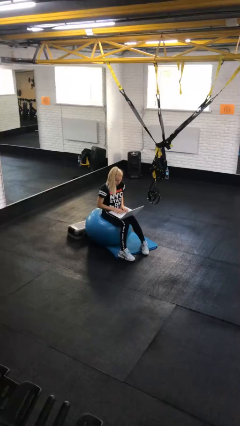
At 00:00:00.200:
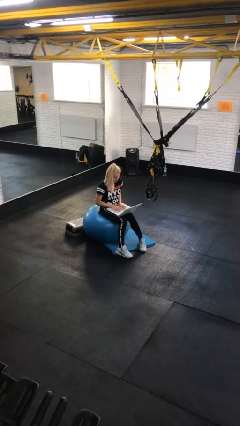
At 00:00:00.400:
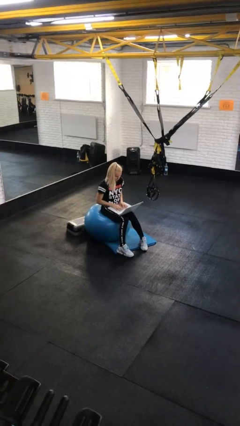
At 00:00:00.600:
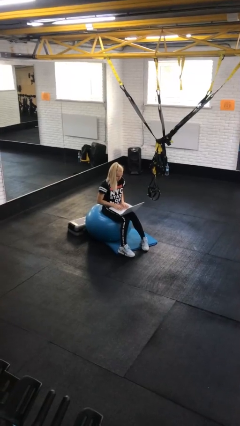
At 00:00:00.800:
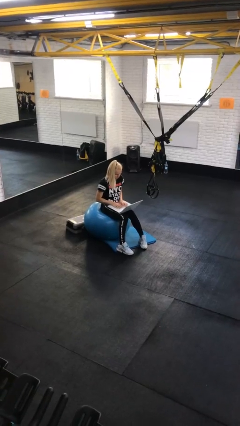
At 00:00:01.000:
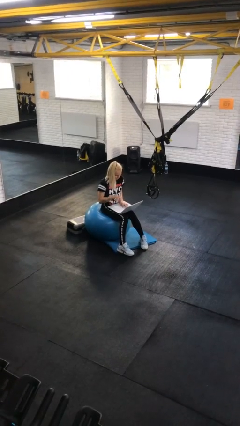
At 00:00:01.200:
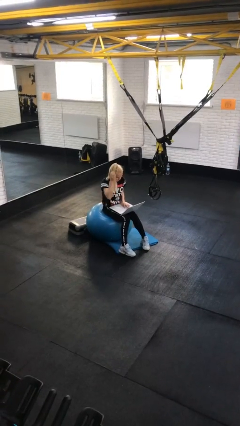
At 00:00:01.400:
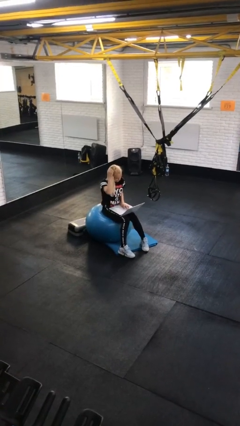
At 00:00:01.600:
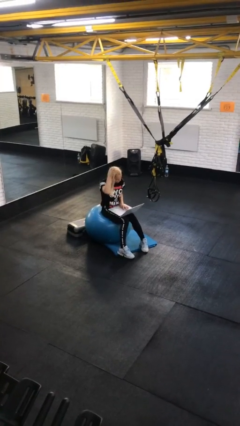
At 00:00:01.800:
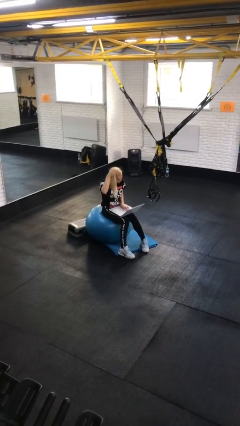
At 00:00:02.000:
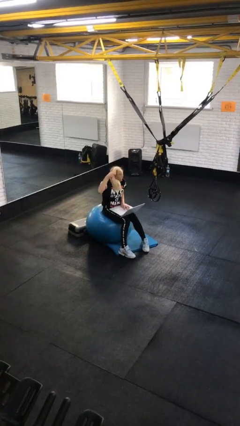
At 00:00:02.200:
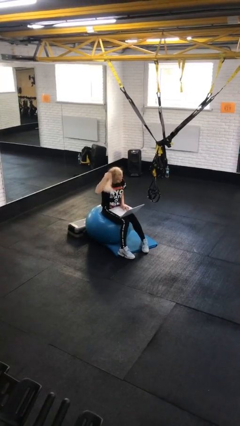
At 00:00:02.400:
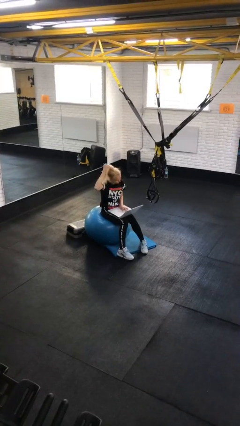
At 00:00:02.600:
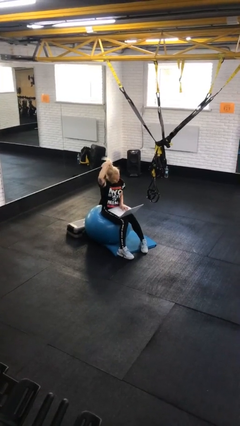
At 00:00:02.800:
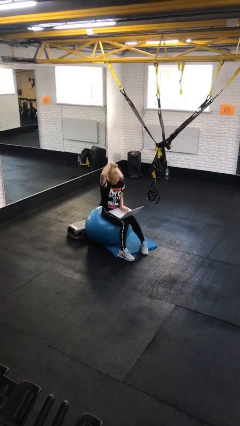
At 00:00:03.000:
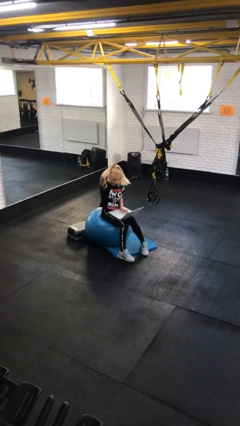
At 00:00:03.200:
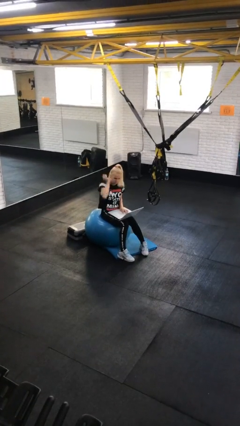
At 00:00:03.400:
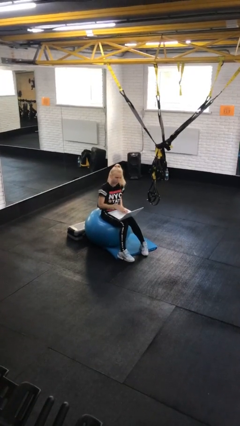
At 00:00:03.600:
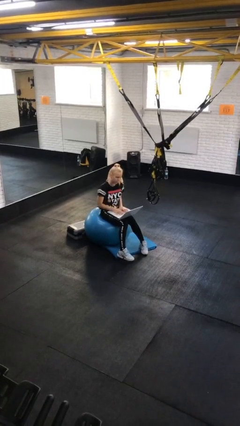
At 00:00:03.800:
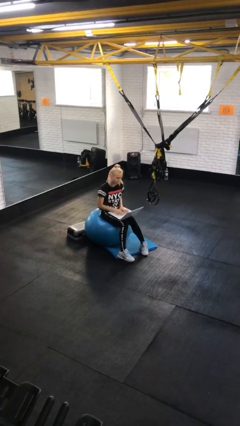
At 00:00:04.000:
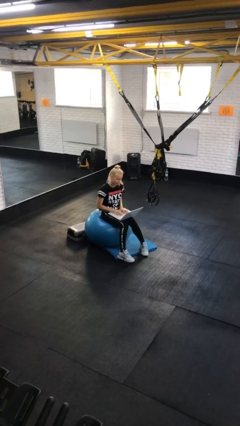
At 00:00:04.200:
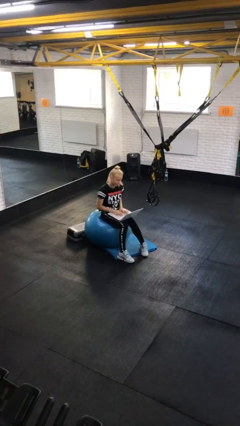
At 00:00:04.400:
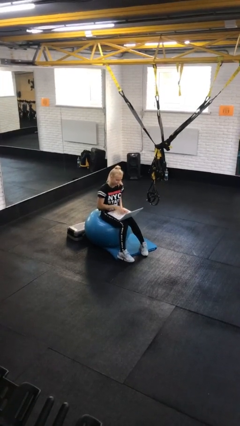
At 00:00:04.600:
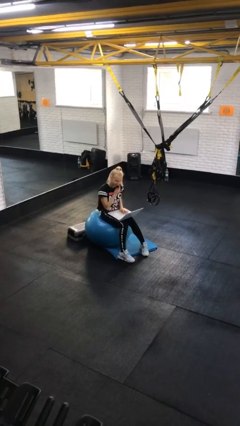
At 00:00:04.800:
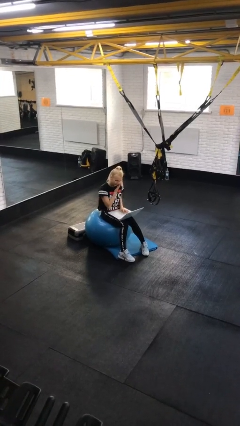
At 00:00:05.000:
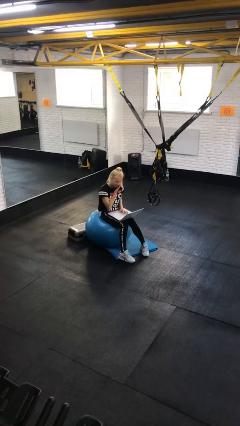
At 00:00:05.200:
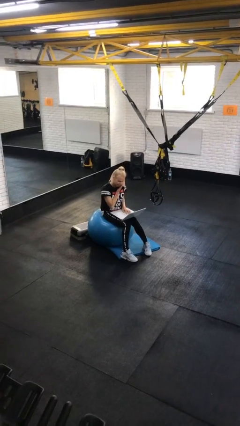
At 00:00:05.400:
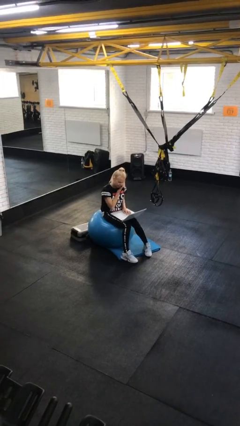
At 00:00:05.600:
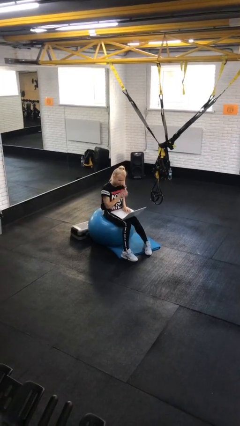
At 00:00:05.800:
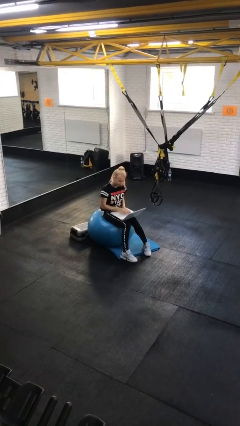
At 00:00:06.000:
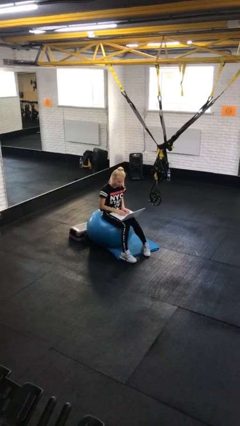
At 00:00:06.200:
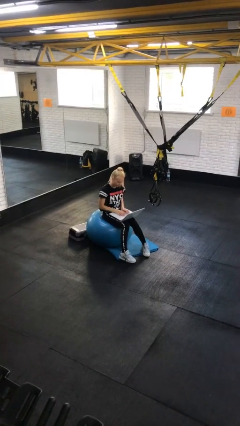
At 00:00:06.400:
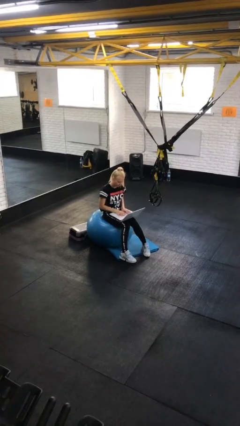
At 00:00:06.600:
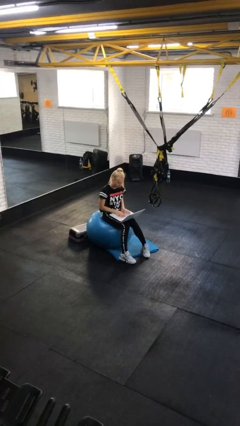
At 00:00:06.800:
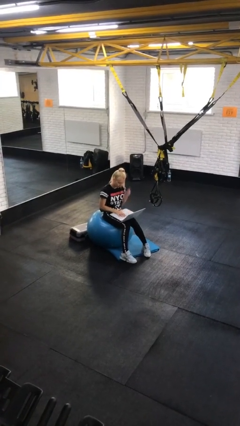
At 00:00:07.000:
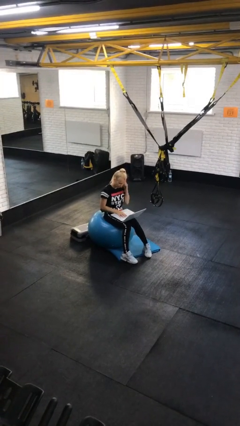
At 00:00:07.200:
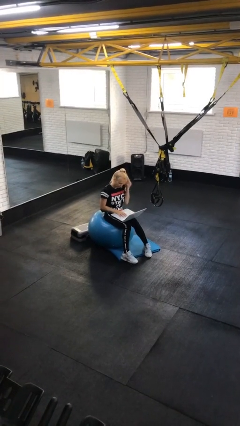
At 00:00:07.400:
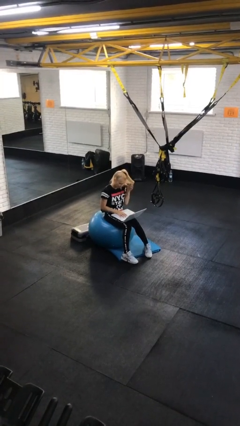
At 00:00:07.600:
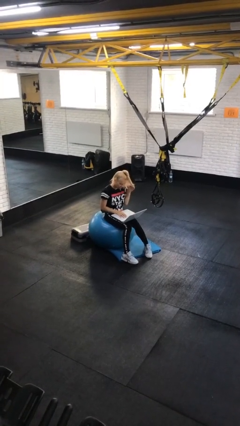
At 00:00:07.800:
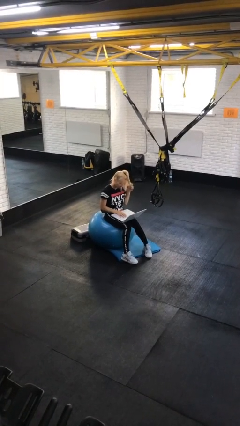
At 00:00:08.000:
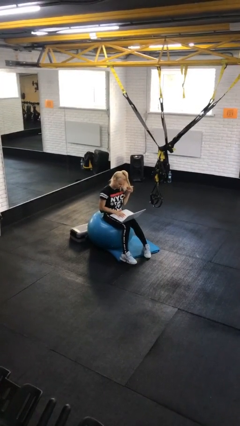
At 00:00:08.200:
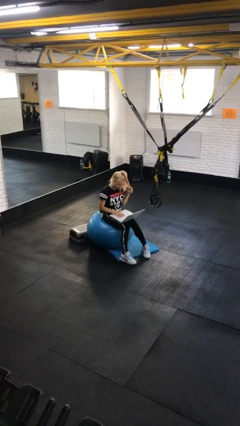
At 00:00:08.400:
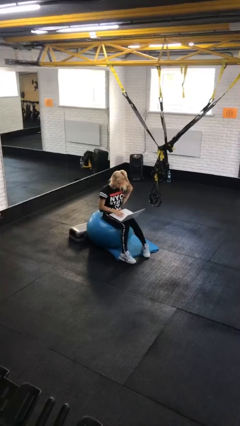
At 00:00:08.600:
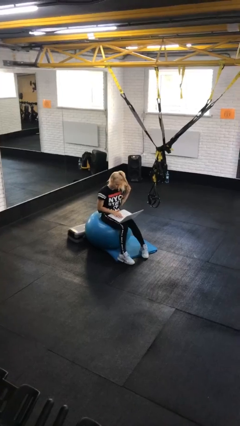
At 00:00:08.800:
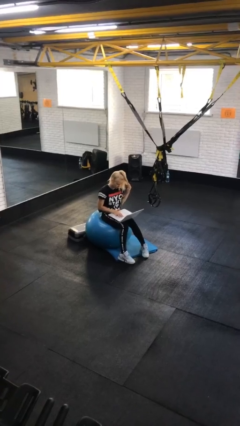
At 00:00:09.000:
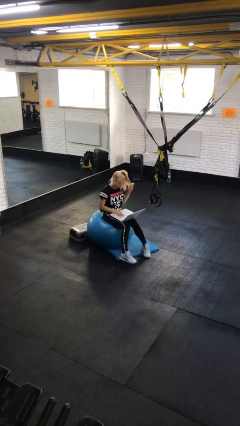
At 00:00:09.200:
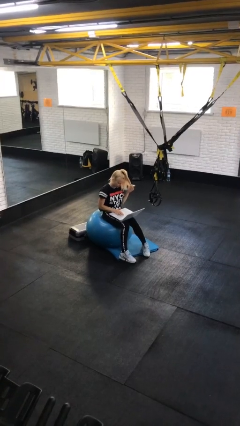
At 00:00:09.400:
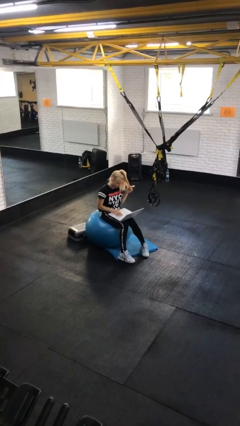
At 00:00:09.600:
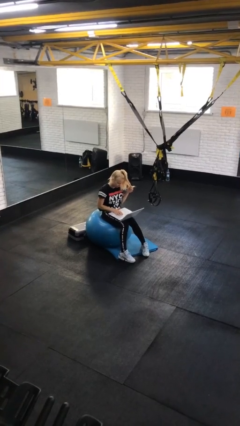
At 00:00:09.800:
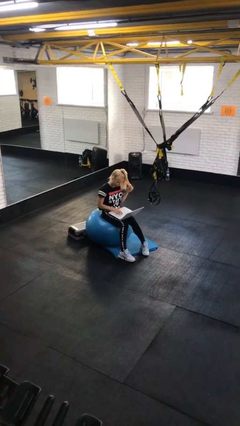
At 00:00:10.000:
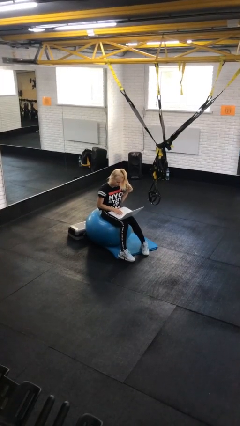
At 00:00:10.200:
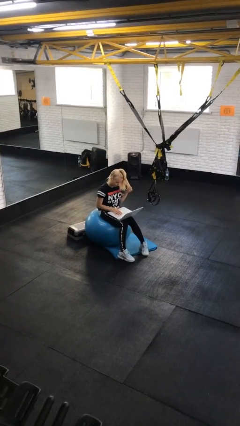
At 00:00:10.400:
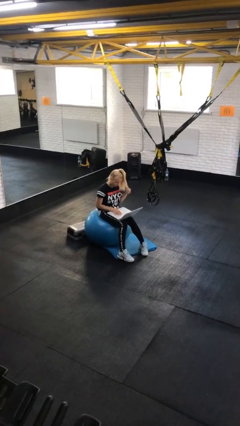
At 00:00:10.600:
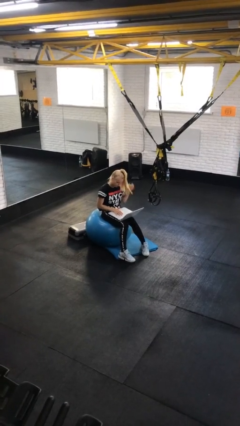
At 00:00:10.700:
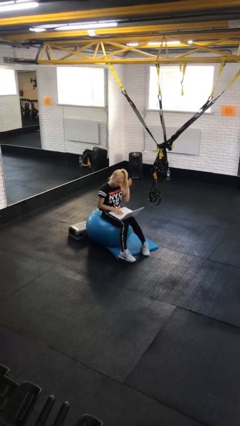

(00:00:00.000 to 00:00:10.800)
person interacts with laptop

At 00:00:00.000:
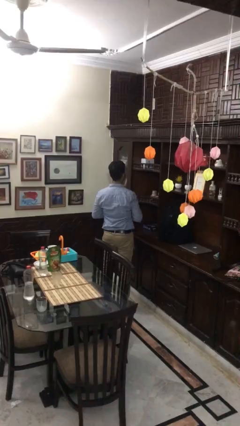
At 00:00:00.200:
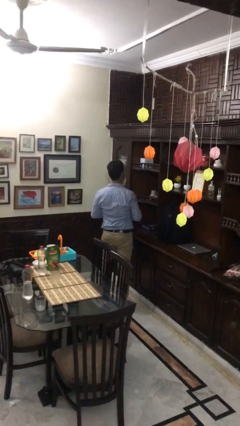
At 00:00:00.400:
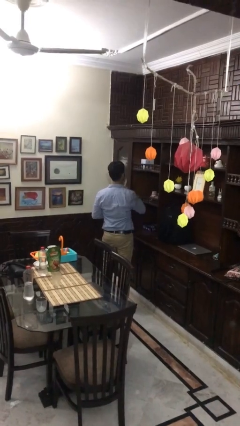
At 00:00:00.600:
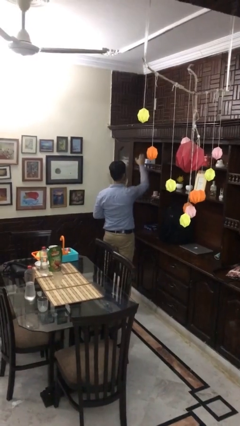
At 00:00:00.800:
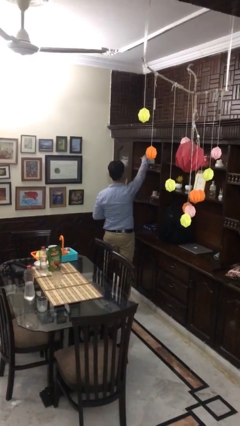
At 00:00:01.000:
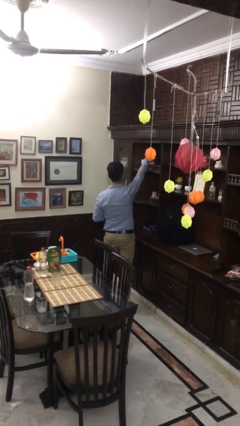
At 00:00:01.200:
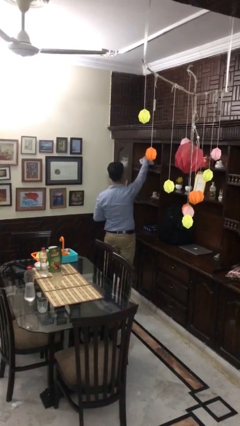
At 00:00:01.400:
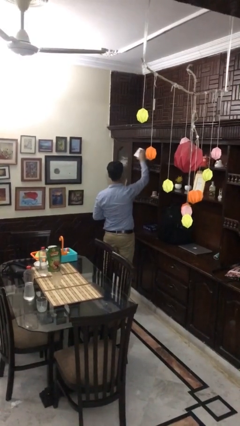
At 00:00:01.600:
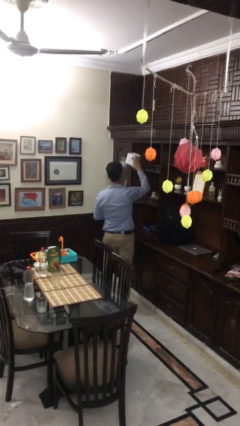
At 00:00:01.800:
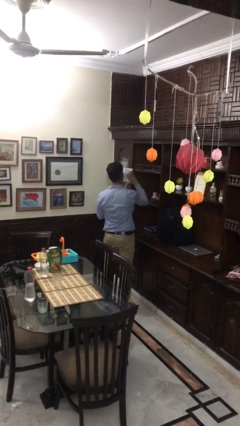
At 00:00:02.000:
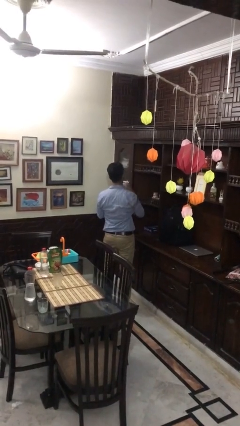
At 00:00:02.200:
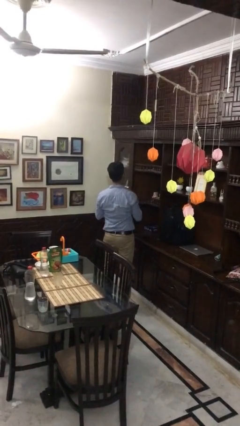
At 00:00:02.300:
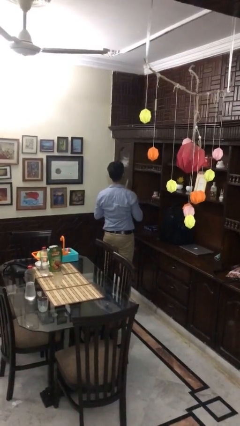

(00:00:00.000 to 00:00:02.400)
person picks up object from shelf

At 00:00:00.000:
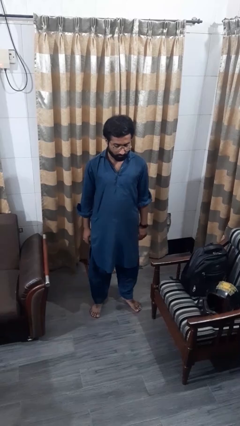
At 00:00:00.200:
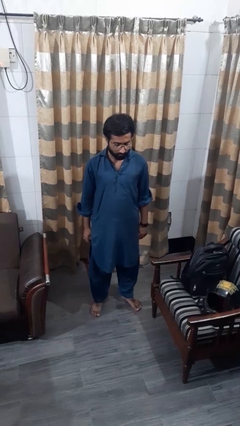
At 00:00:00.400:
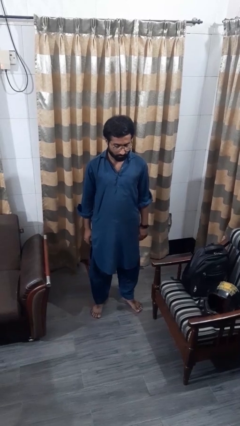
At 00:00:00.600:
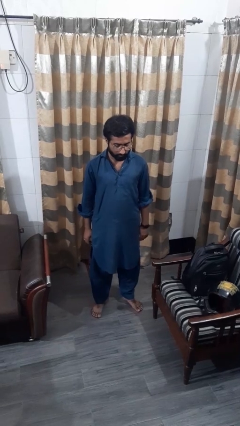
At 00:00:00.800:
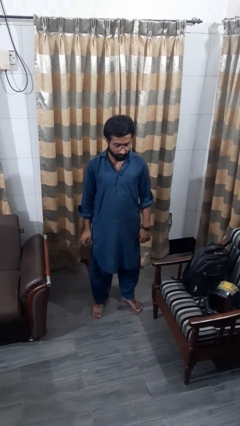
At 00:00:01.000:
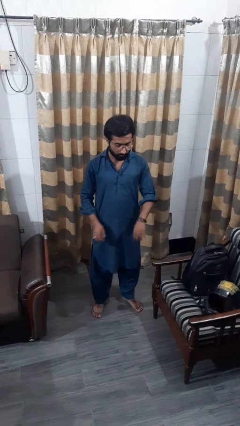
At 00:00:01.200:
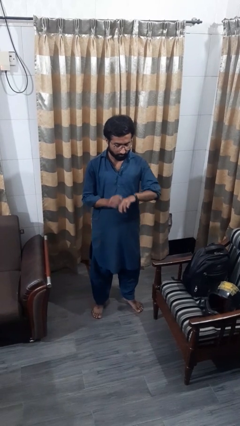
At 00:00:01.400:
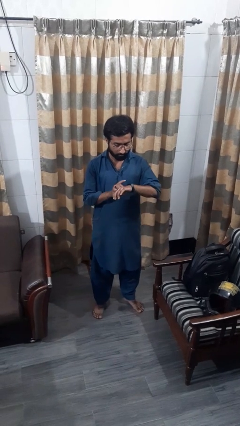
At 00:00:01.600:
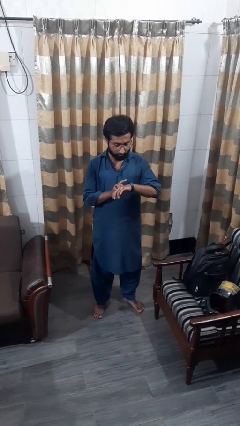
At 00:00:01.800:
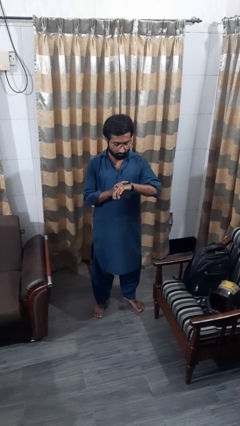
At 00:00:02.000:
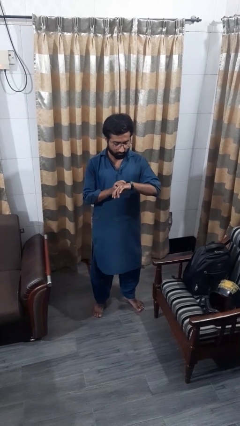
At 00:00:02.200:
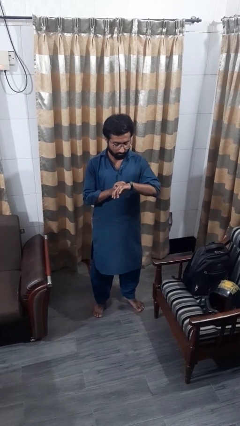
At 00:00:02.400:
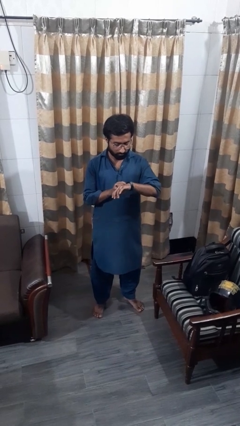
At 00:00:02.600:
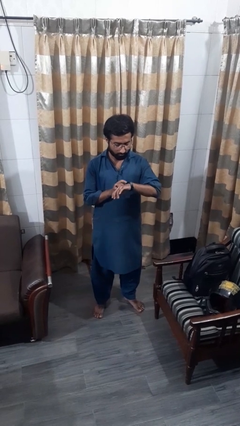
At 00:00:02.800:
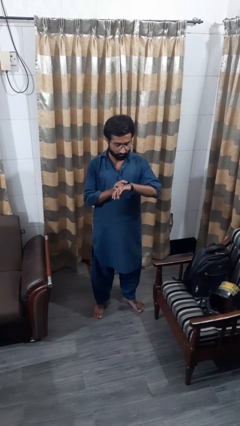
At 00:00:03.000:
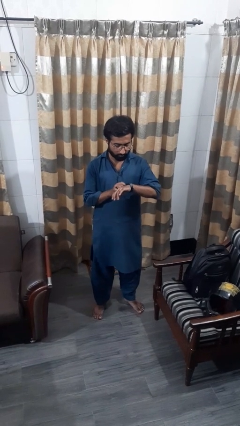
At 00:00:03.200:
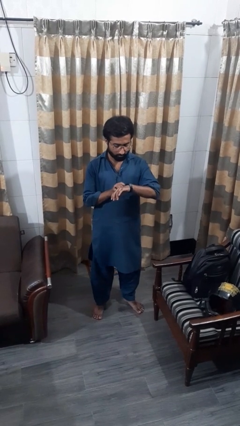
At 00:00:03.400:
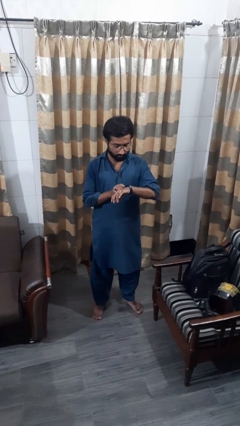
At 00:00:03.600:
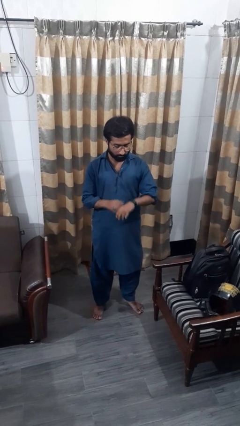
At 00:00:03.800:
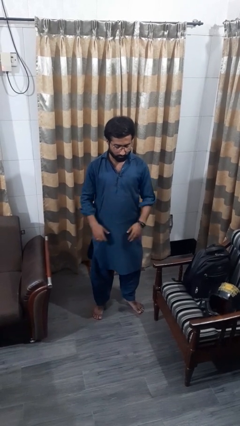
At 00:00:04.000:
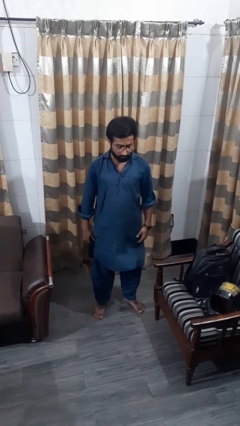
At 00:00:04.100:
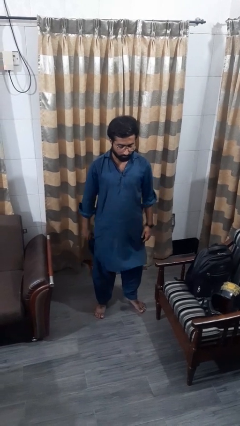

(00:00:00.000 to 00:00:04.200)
person looks at wristwatch

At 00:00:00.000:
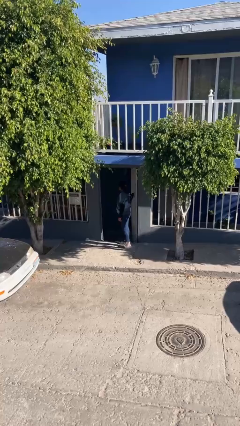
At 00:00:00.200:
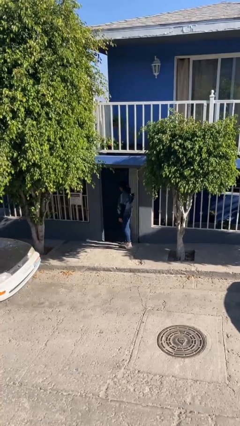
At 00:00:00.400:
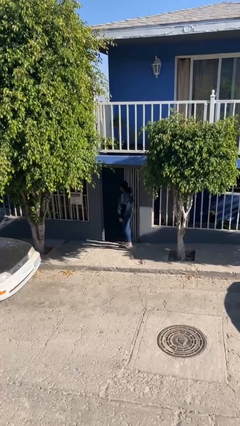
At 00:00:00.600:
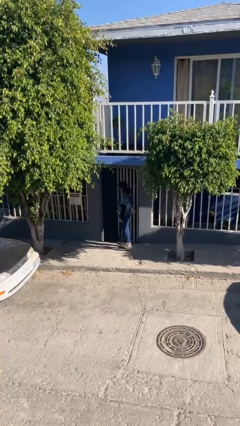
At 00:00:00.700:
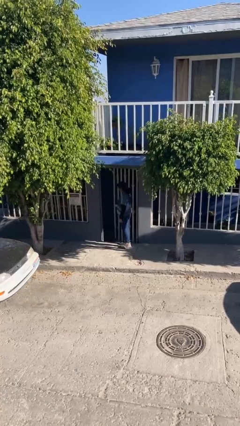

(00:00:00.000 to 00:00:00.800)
person closes facility door
